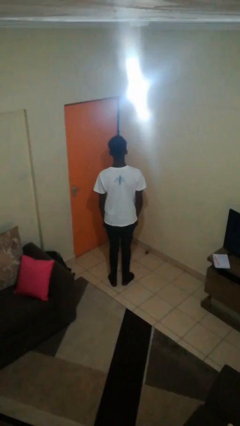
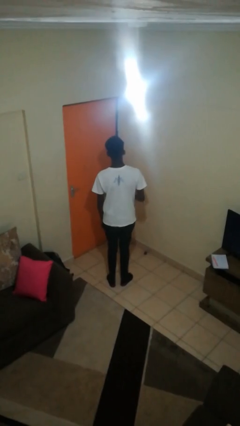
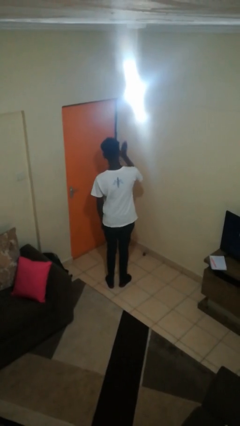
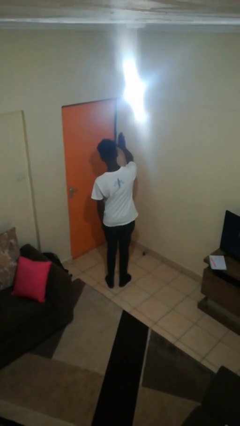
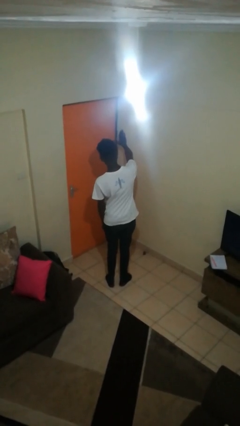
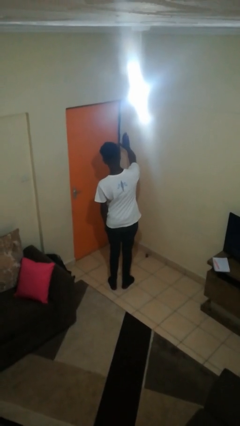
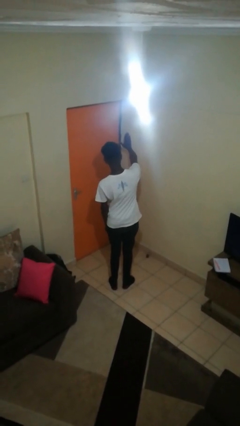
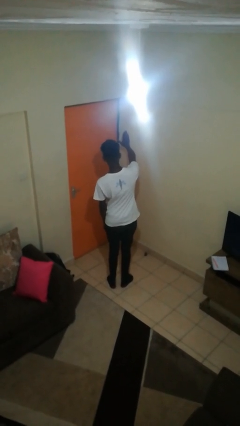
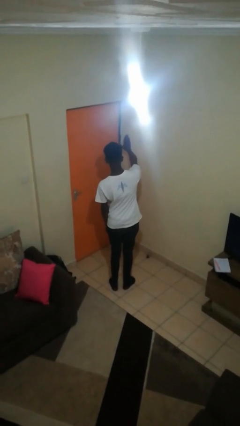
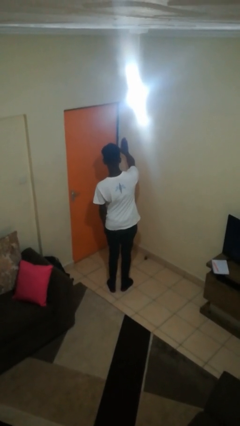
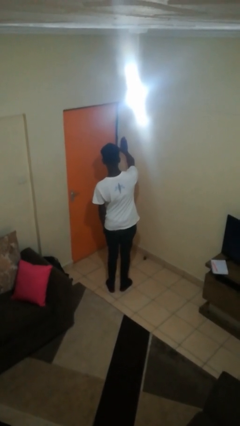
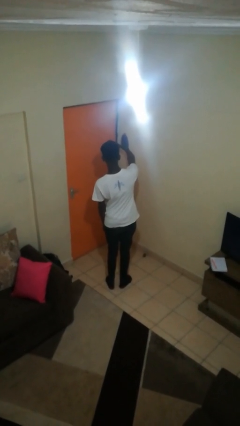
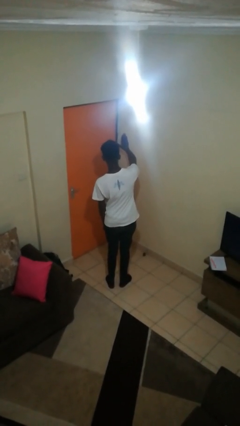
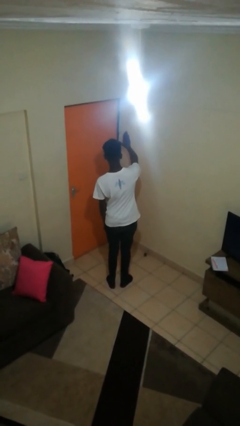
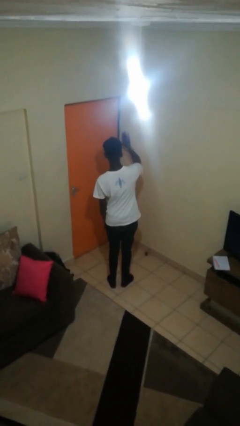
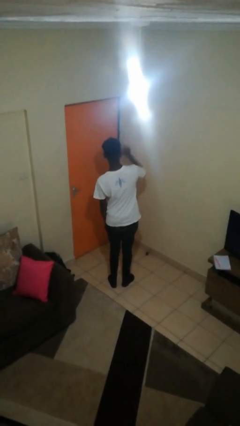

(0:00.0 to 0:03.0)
person gestures stop

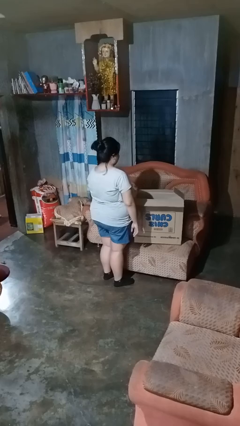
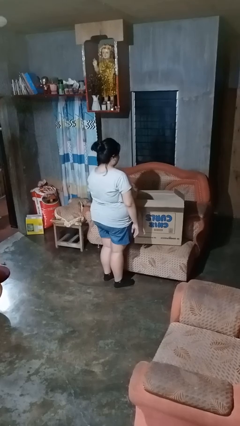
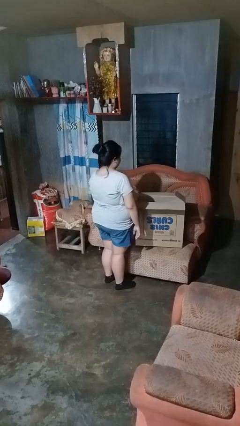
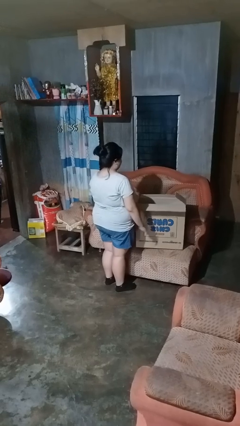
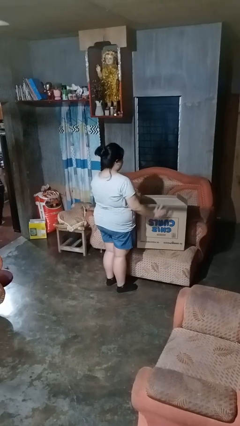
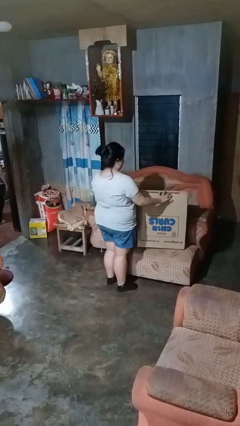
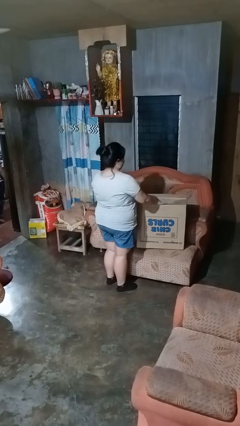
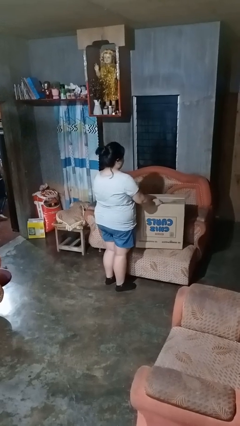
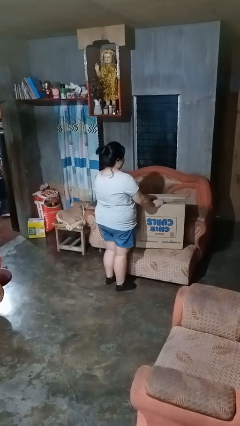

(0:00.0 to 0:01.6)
person closes box

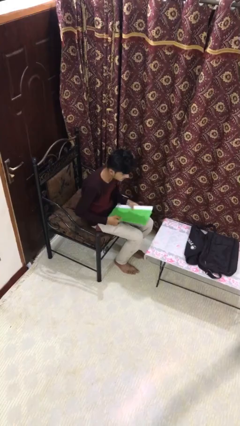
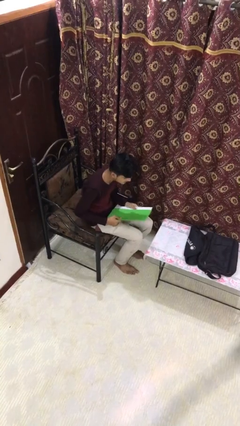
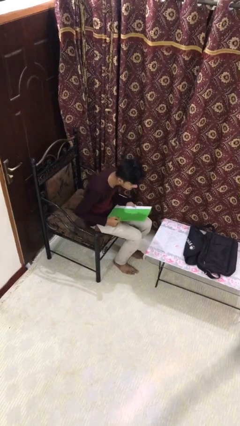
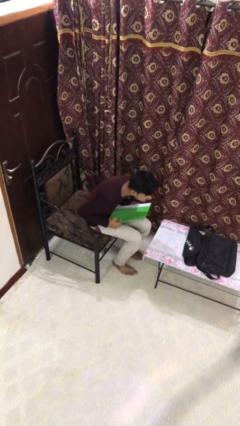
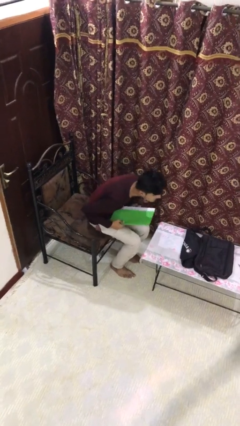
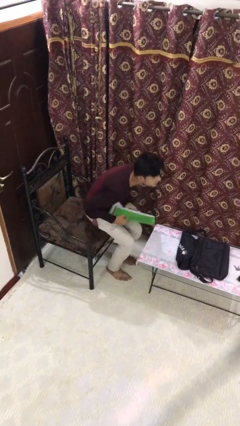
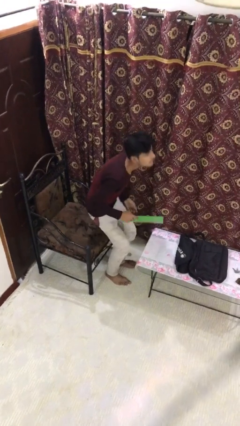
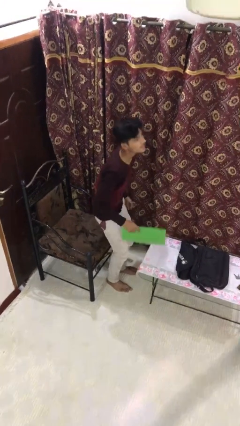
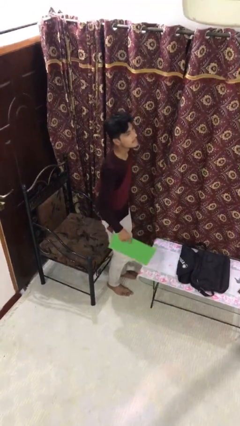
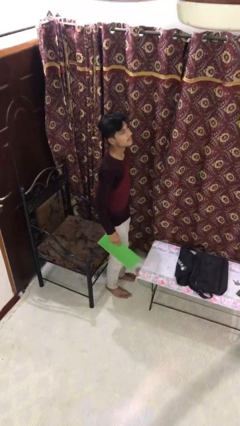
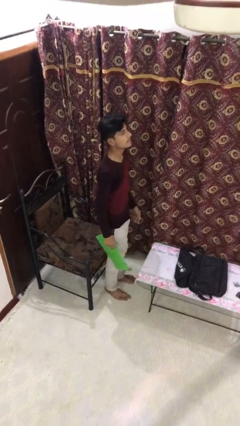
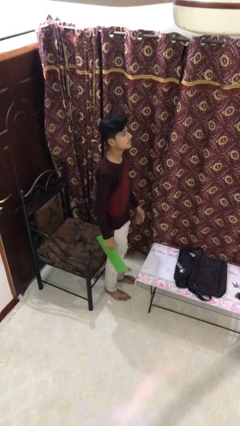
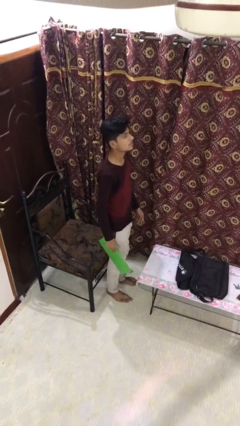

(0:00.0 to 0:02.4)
person stands up

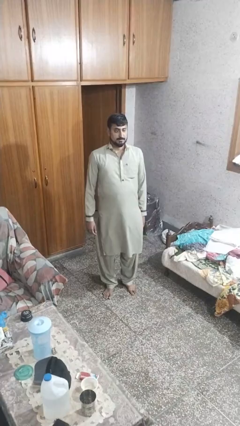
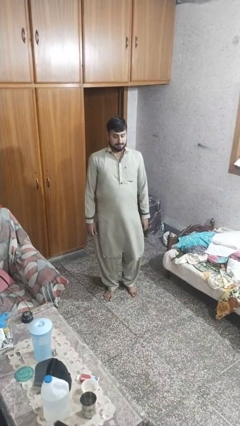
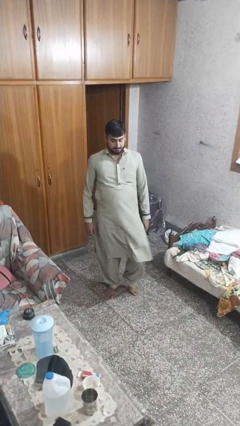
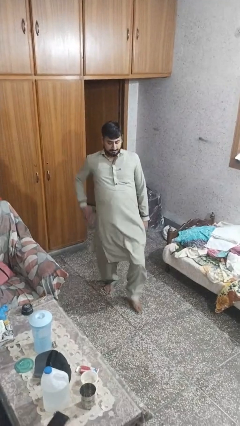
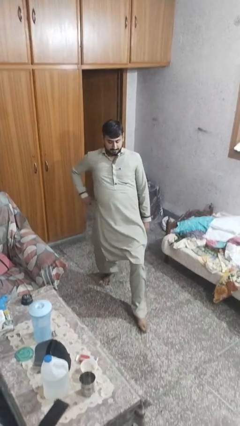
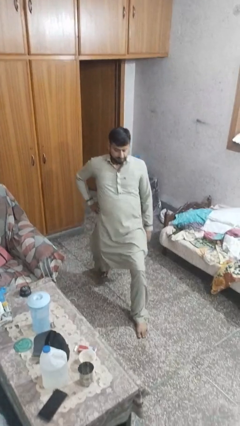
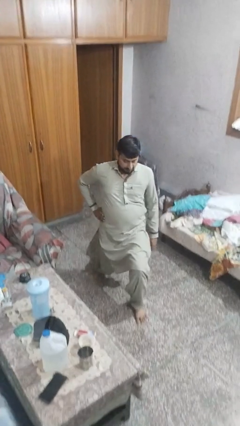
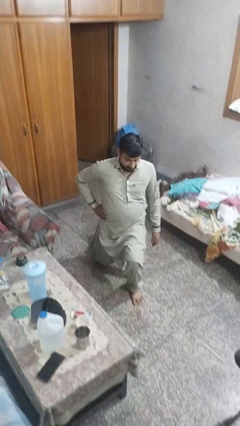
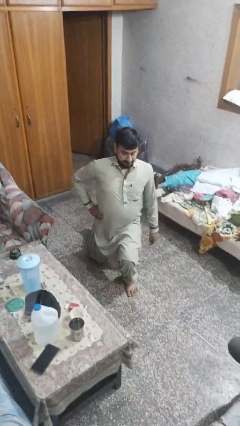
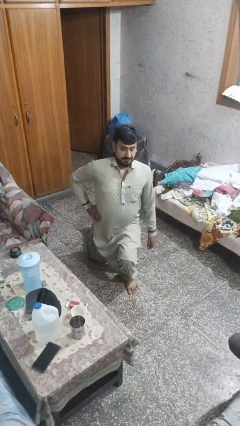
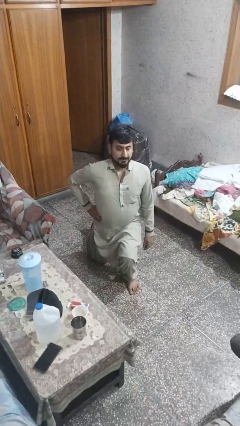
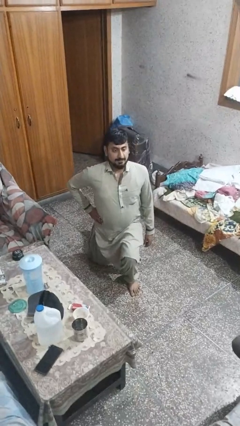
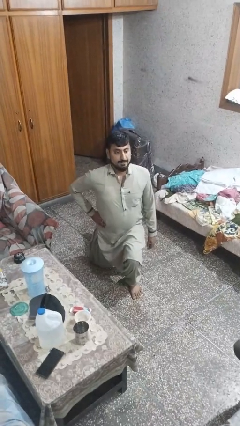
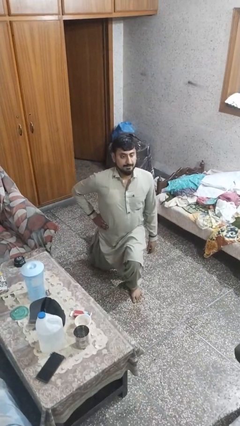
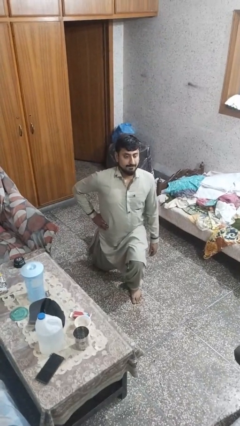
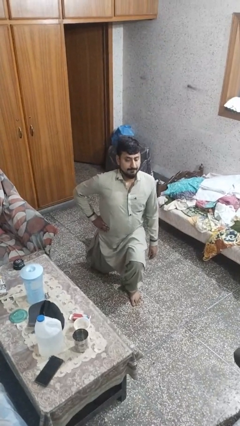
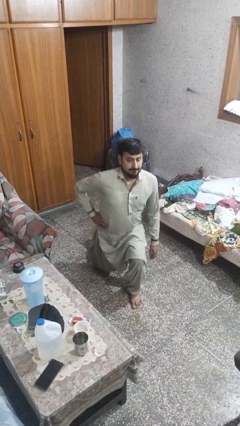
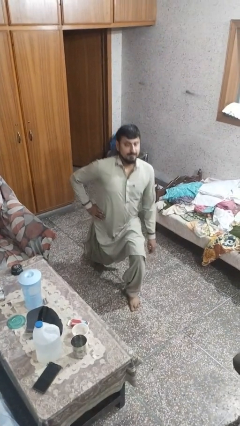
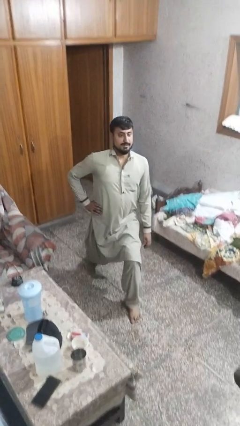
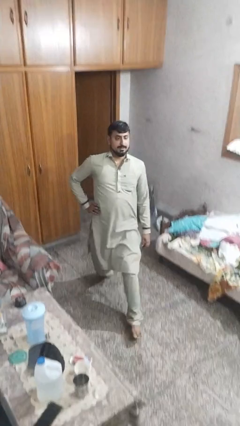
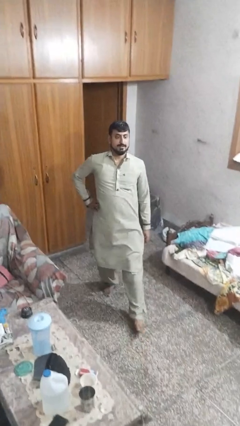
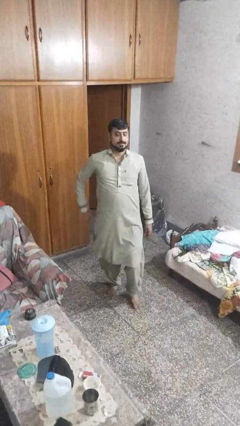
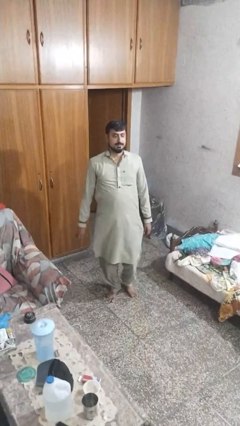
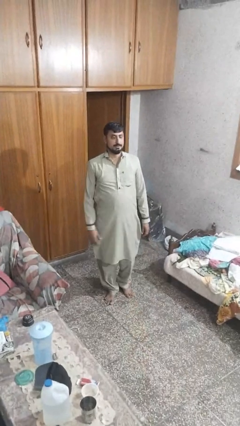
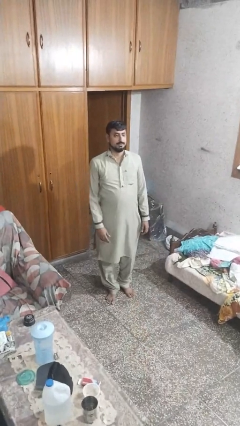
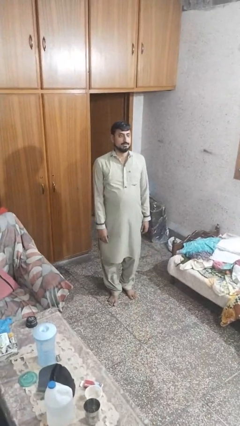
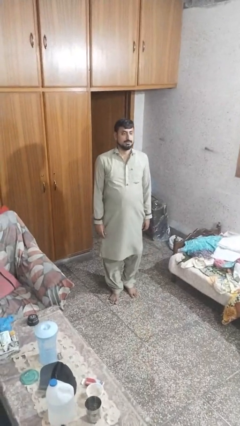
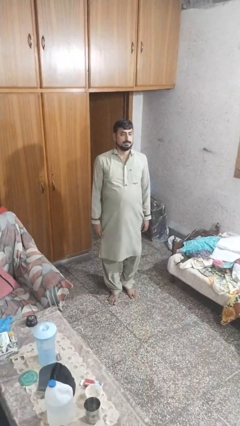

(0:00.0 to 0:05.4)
person exercises with lunges

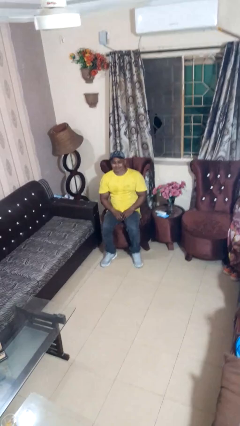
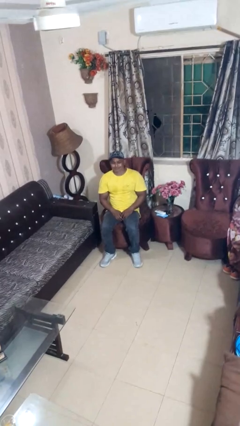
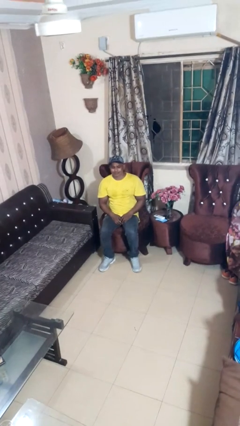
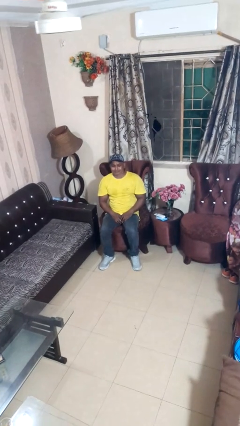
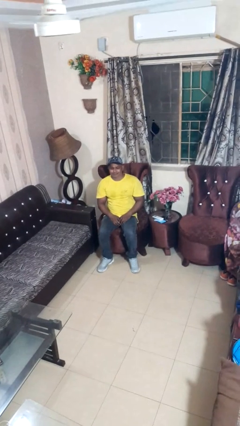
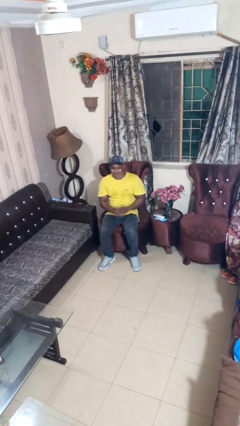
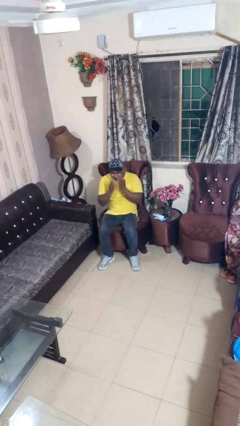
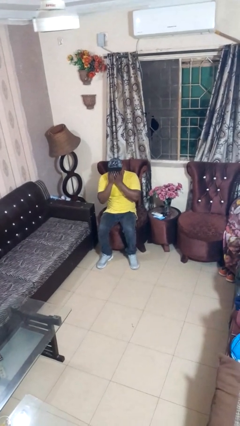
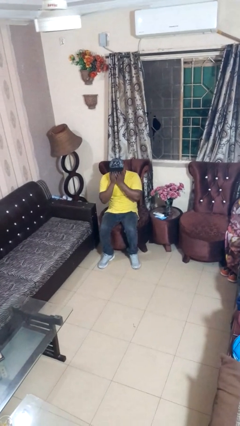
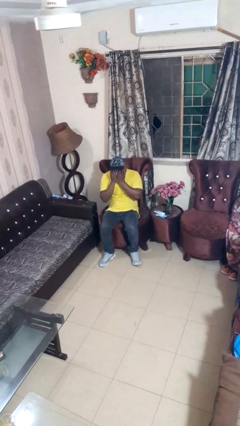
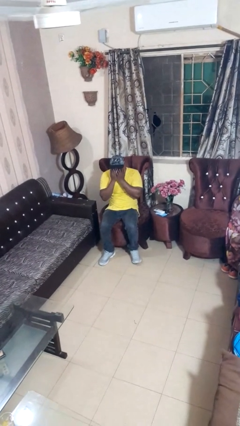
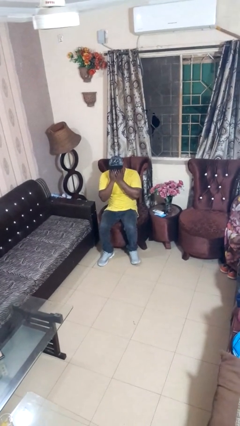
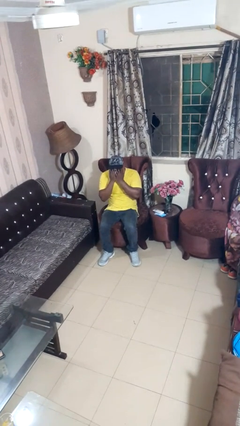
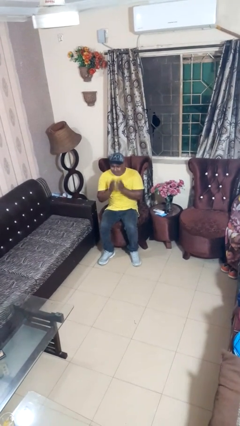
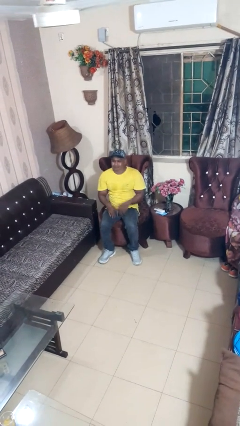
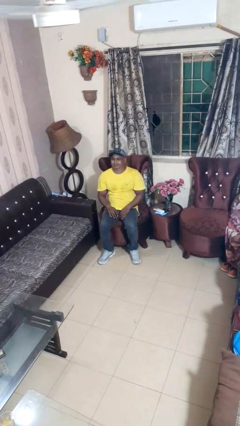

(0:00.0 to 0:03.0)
person covers face with hands

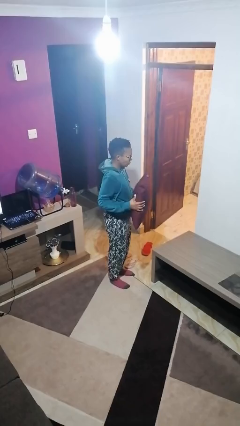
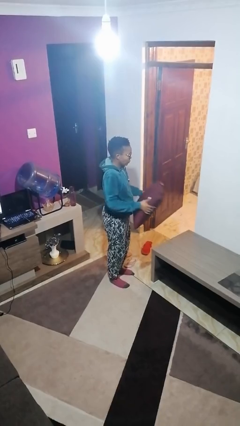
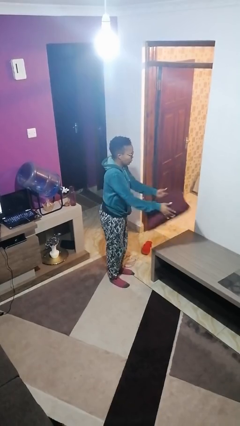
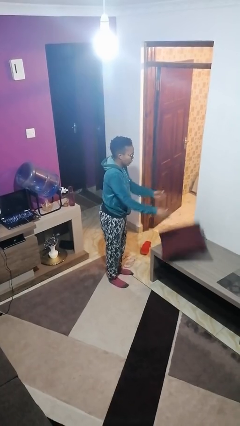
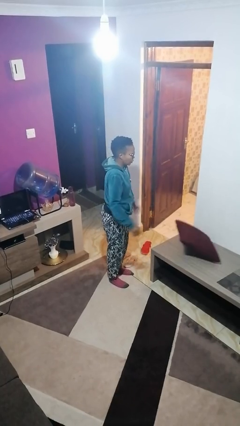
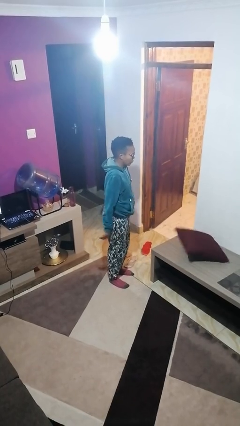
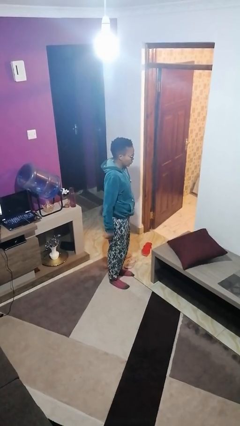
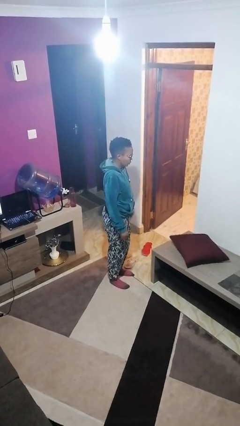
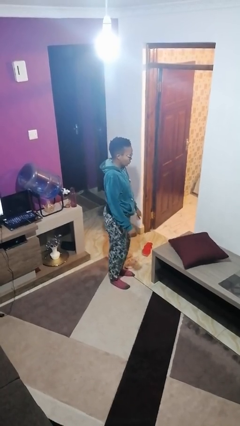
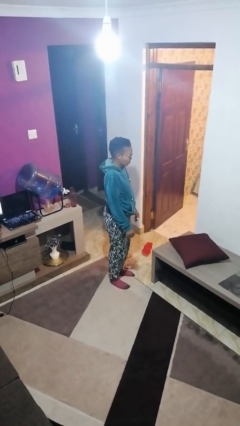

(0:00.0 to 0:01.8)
person throws object on table
